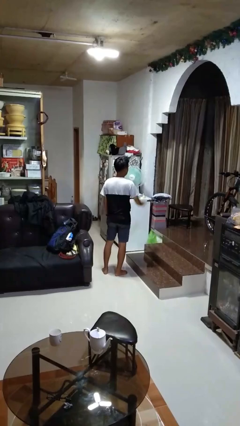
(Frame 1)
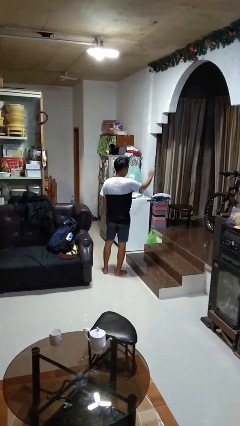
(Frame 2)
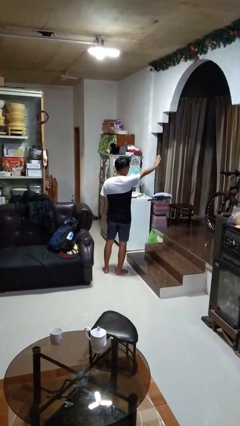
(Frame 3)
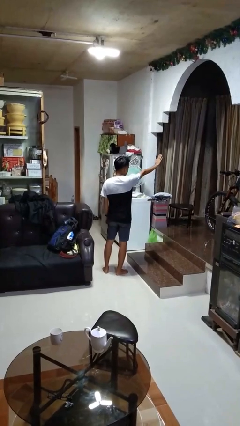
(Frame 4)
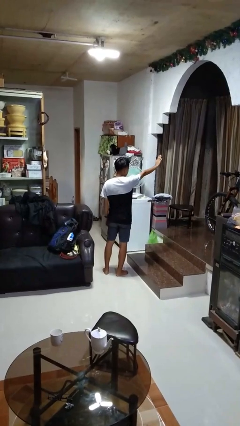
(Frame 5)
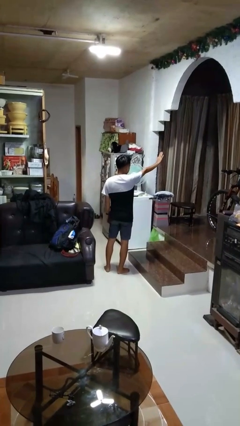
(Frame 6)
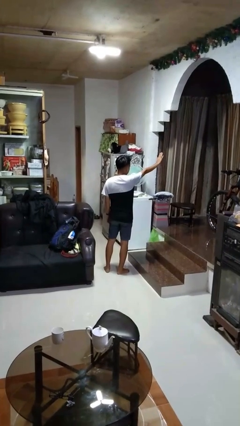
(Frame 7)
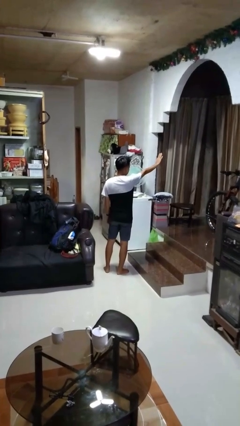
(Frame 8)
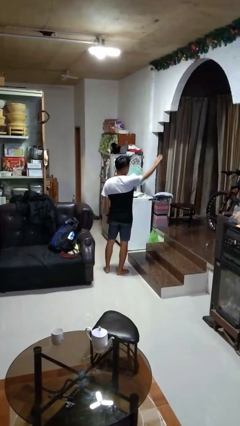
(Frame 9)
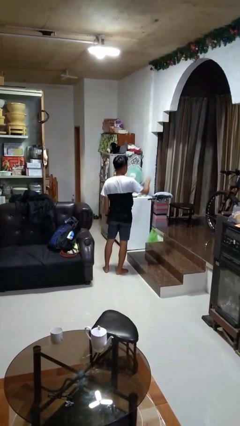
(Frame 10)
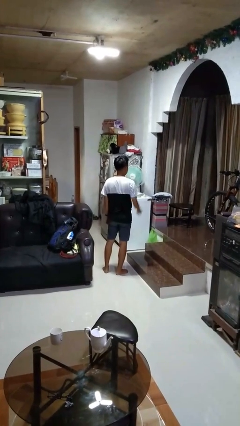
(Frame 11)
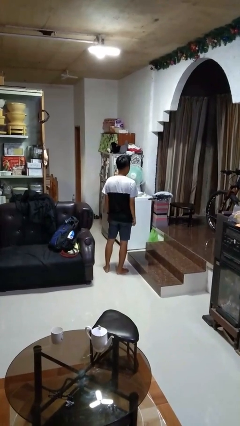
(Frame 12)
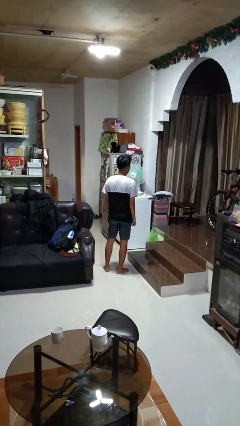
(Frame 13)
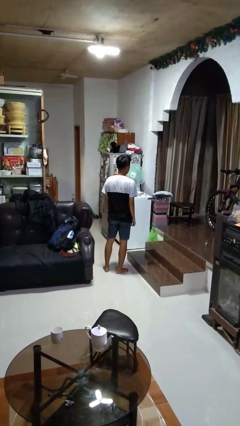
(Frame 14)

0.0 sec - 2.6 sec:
person gestures stop

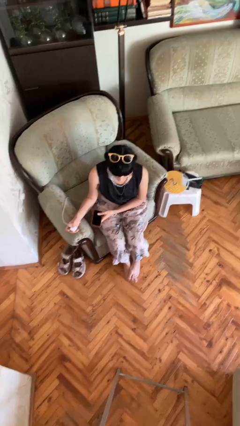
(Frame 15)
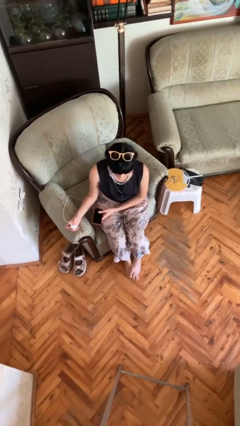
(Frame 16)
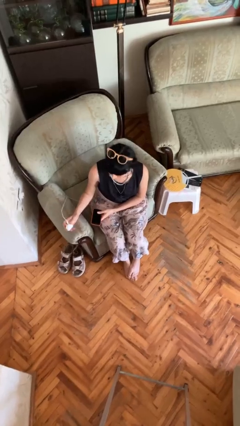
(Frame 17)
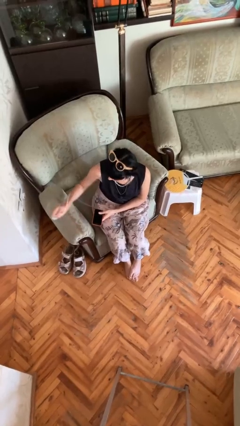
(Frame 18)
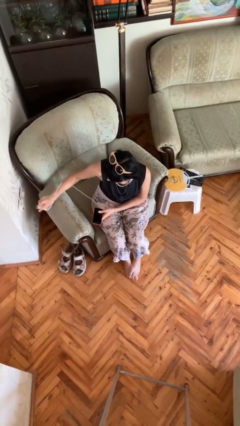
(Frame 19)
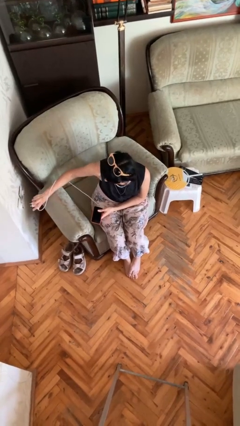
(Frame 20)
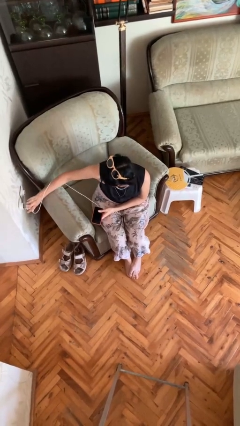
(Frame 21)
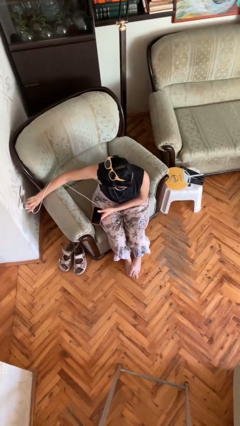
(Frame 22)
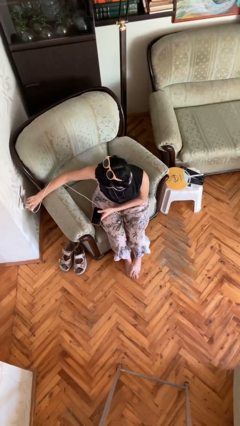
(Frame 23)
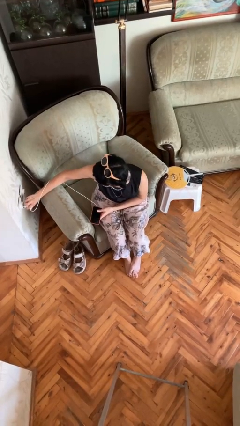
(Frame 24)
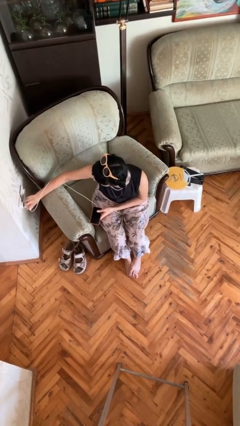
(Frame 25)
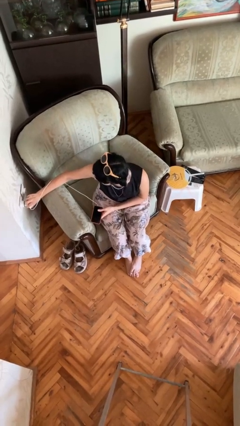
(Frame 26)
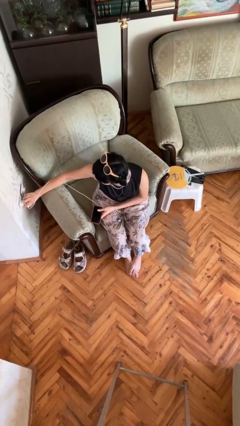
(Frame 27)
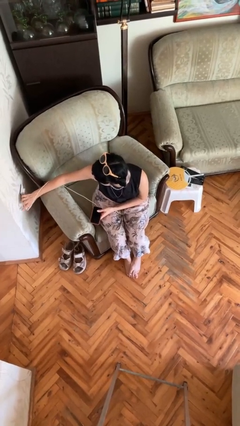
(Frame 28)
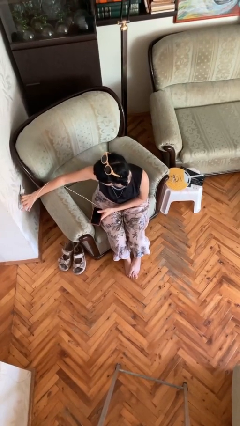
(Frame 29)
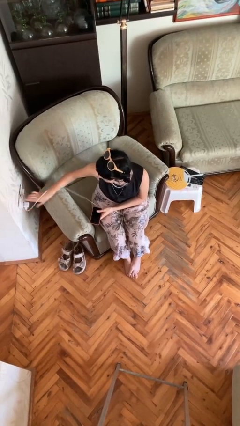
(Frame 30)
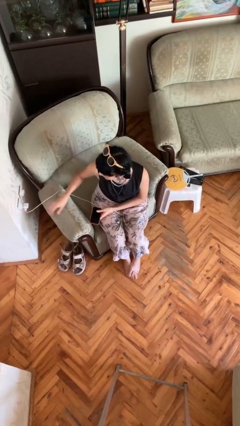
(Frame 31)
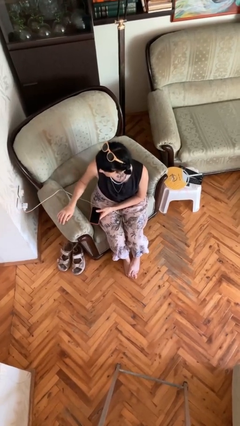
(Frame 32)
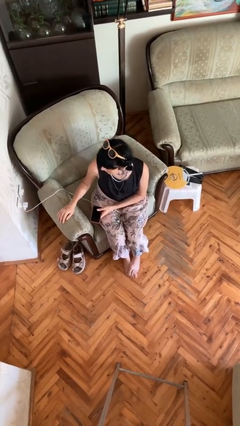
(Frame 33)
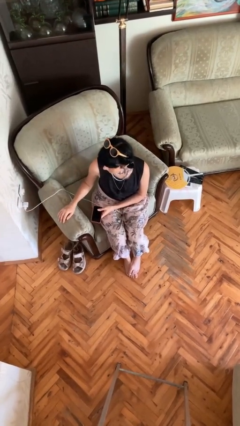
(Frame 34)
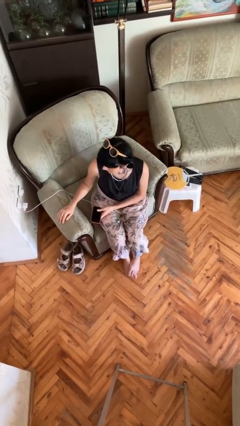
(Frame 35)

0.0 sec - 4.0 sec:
person plugs into electrical socket

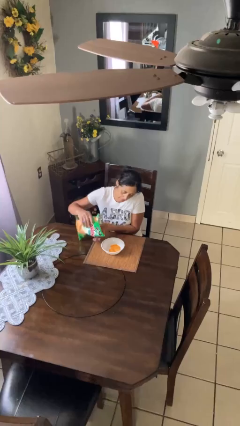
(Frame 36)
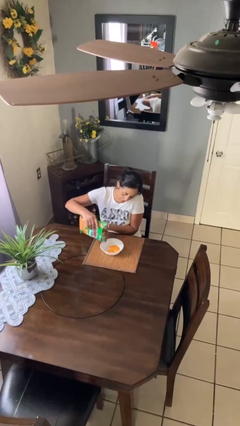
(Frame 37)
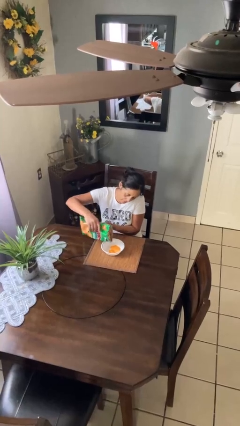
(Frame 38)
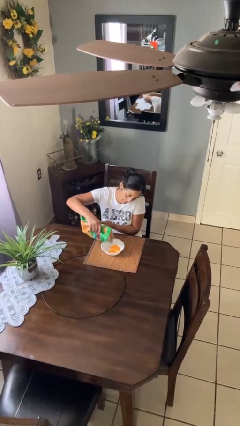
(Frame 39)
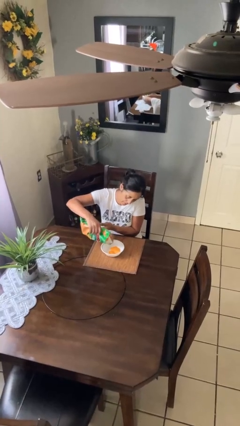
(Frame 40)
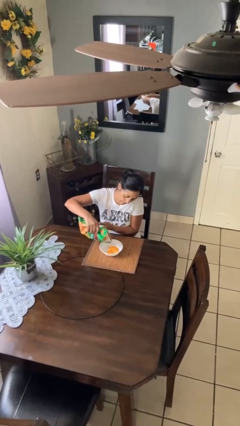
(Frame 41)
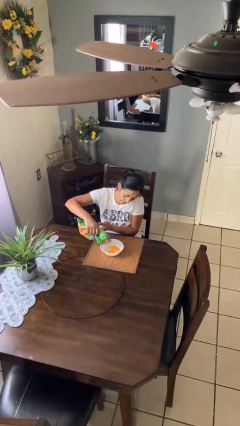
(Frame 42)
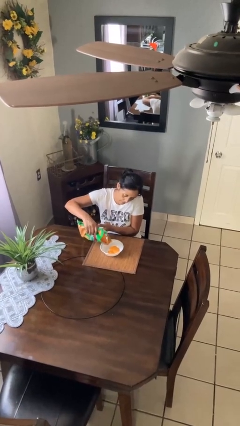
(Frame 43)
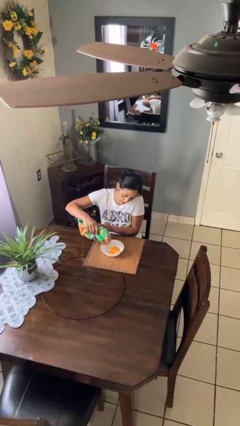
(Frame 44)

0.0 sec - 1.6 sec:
person pours into bowl

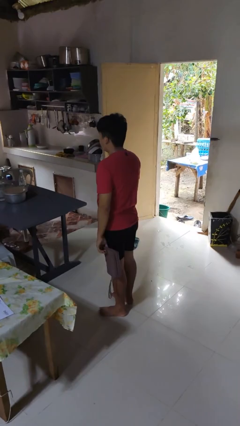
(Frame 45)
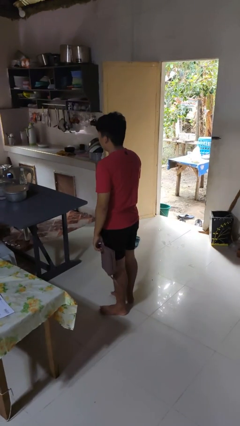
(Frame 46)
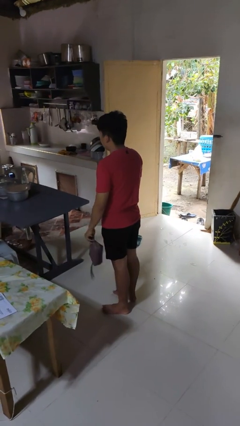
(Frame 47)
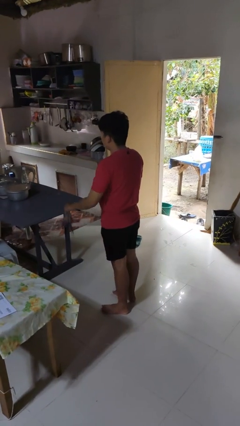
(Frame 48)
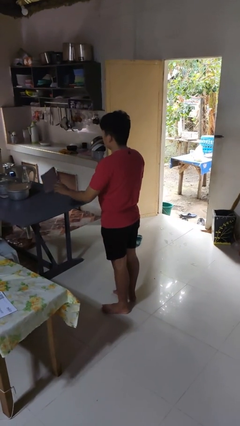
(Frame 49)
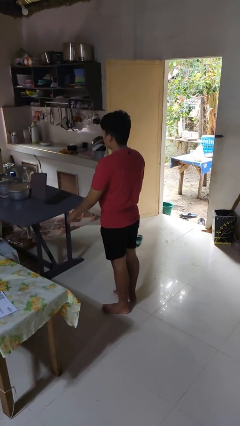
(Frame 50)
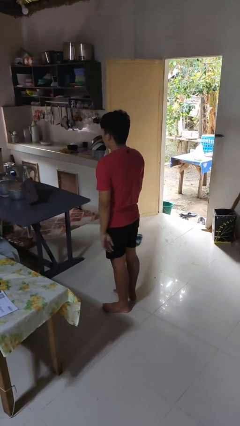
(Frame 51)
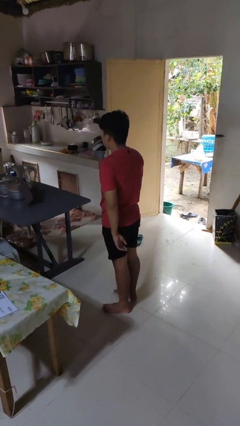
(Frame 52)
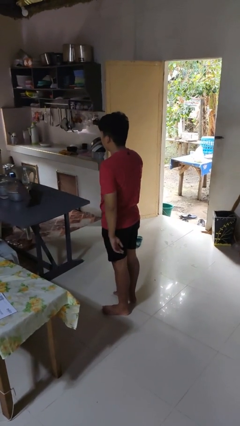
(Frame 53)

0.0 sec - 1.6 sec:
person throws object on table

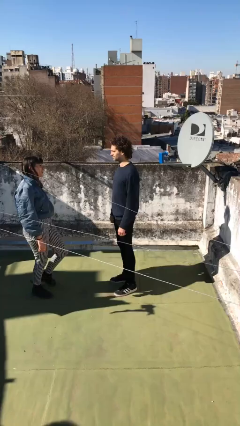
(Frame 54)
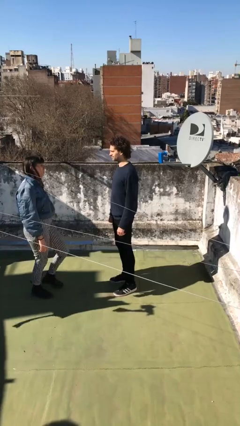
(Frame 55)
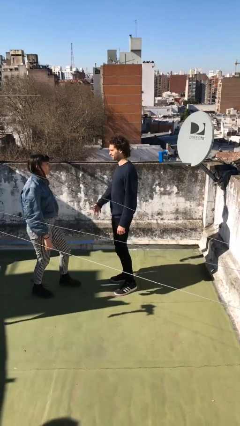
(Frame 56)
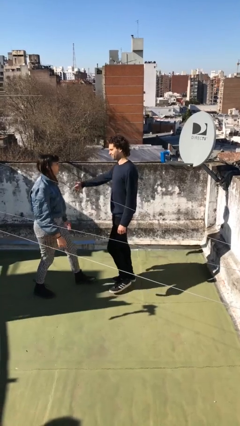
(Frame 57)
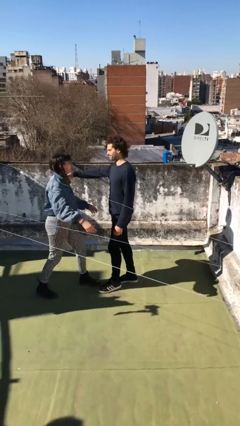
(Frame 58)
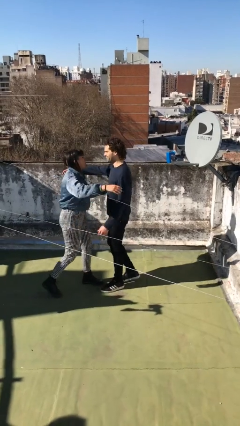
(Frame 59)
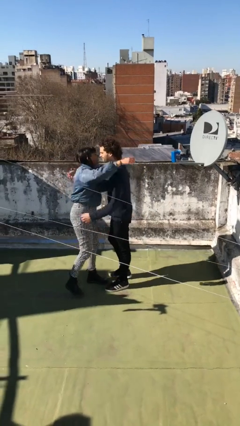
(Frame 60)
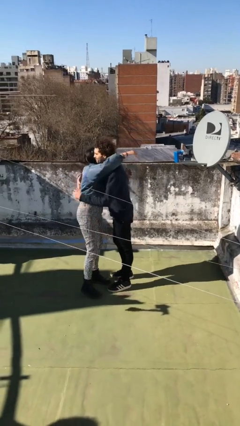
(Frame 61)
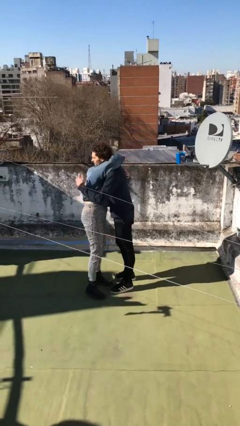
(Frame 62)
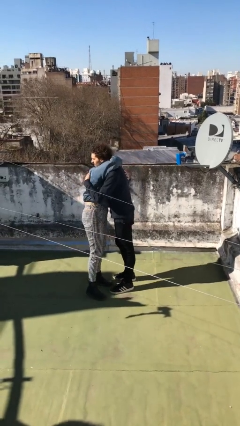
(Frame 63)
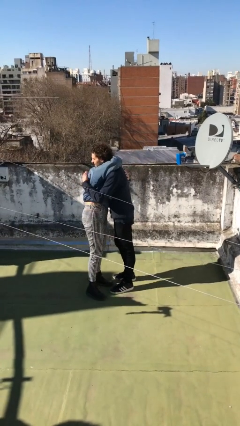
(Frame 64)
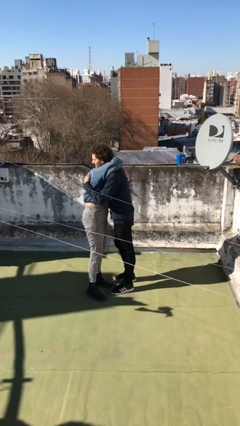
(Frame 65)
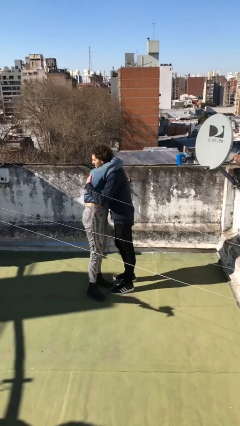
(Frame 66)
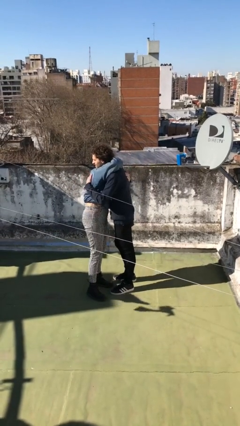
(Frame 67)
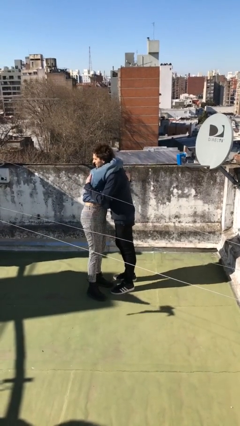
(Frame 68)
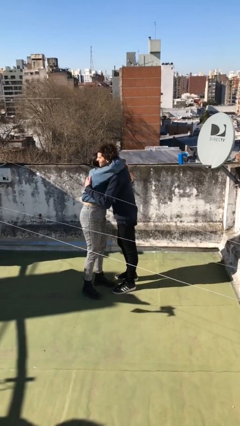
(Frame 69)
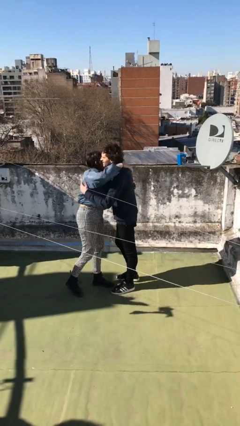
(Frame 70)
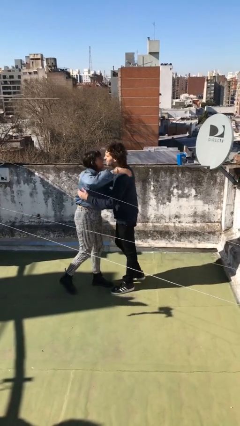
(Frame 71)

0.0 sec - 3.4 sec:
person embraces person

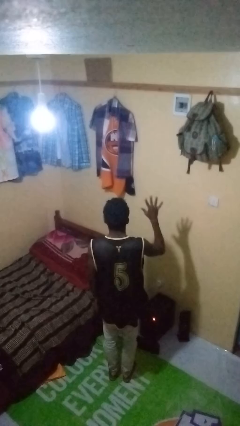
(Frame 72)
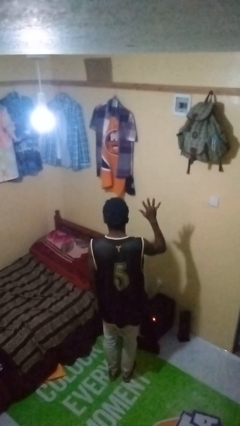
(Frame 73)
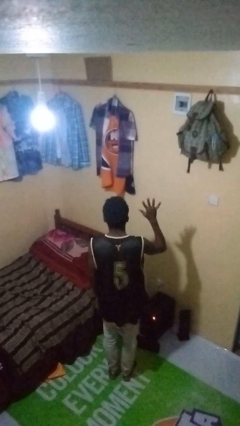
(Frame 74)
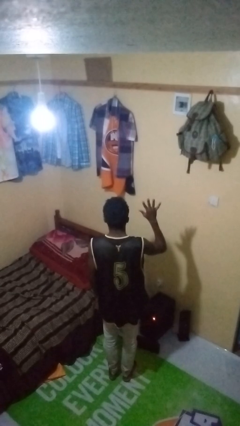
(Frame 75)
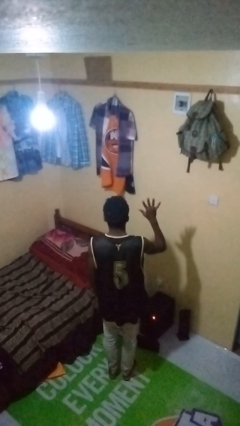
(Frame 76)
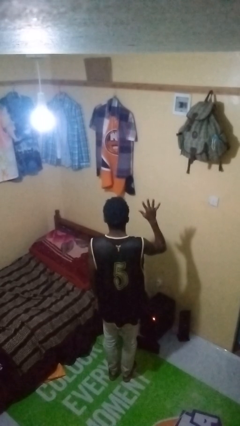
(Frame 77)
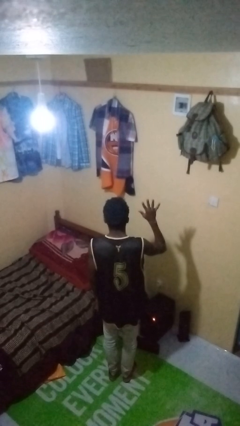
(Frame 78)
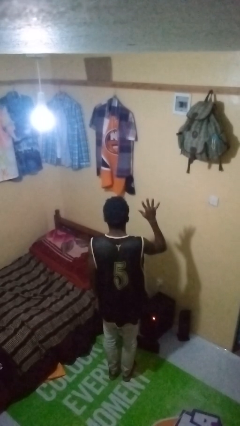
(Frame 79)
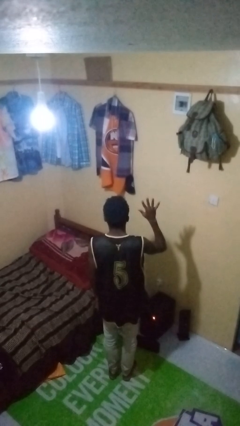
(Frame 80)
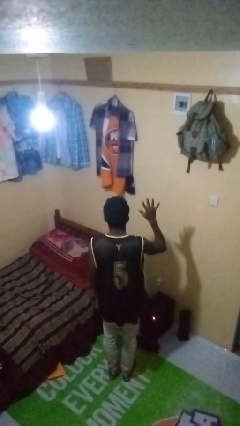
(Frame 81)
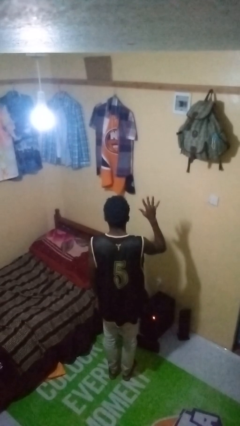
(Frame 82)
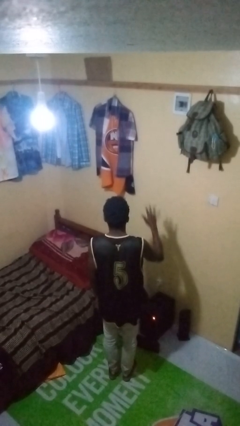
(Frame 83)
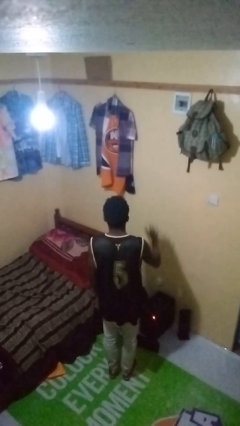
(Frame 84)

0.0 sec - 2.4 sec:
person gestures number five

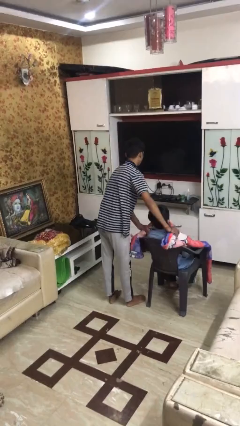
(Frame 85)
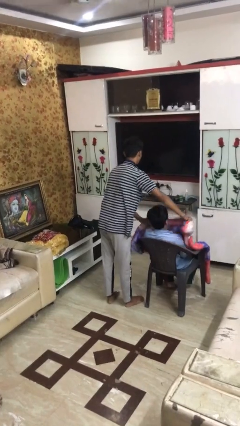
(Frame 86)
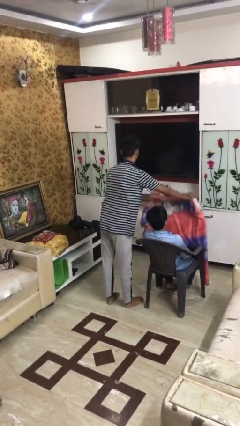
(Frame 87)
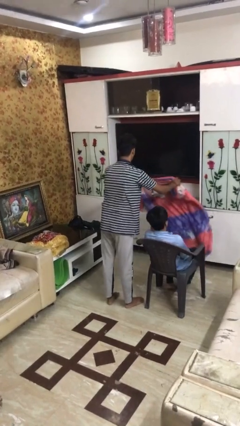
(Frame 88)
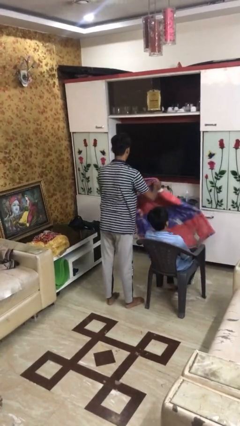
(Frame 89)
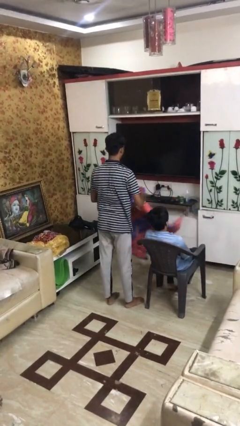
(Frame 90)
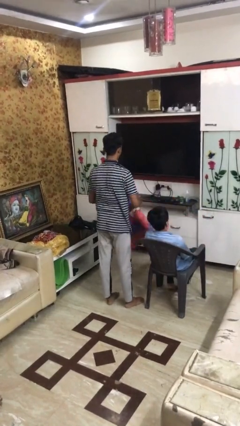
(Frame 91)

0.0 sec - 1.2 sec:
person uncovers friend with blanket

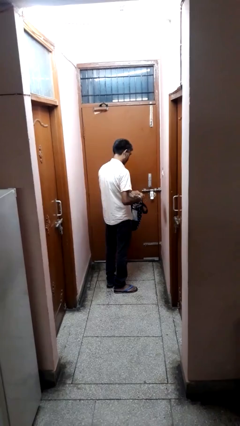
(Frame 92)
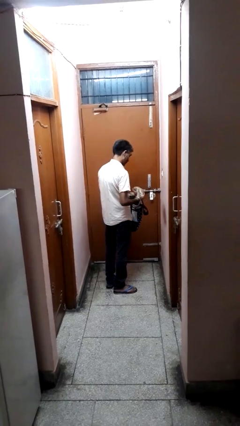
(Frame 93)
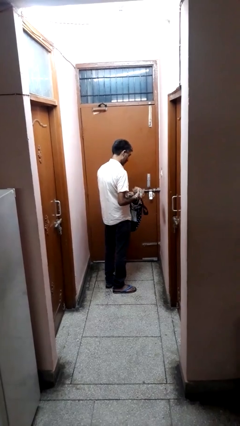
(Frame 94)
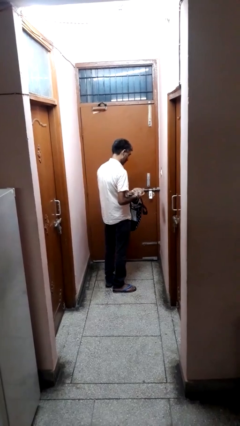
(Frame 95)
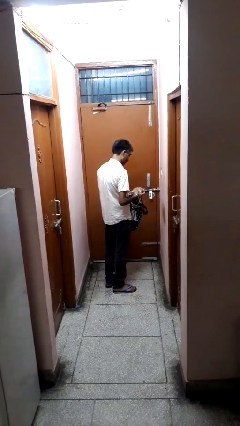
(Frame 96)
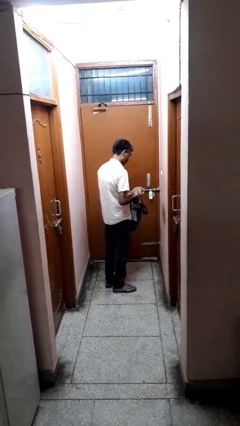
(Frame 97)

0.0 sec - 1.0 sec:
person takes object from bag
